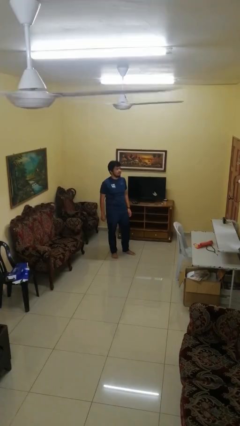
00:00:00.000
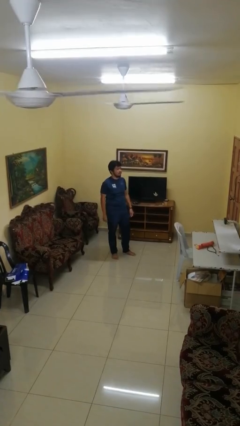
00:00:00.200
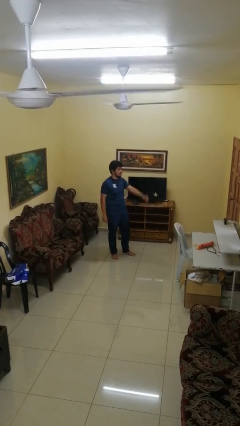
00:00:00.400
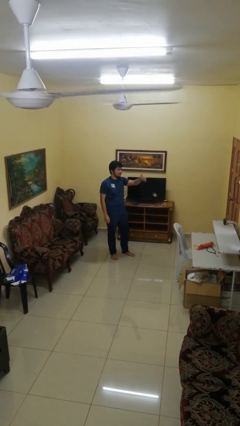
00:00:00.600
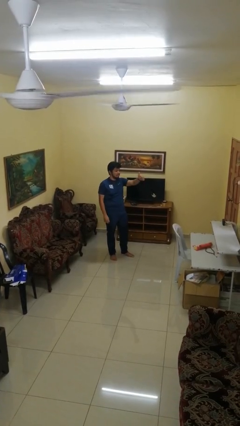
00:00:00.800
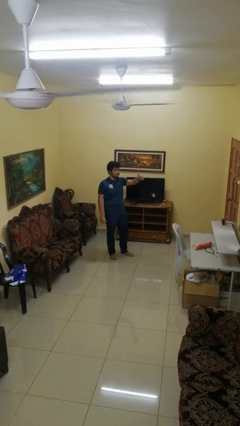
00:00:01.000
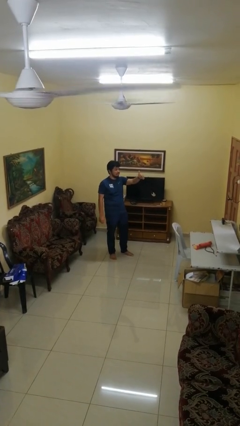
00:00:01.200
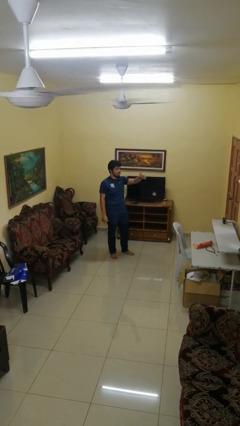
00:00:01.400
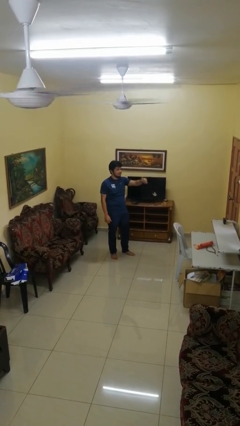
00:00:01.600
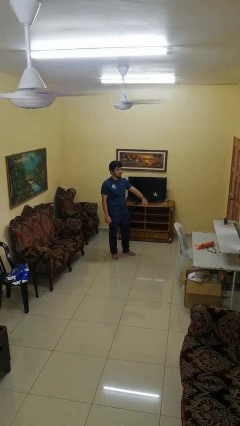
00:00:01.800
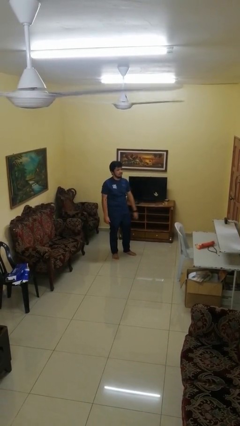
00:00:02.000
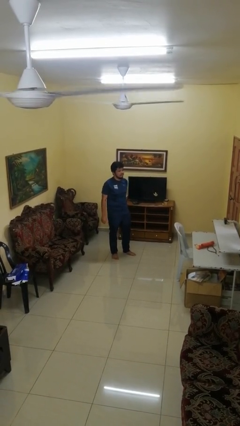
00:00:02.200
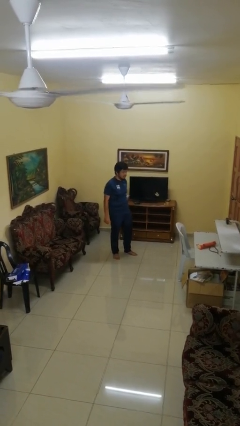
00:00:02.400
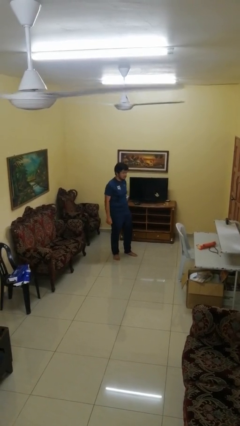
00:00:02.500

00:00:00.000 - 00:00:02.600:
person gestures thumbs up

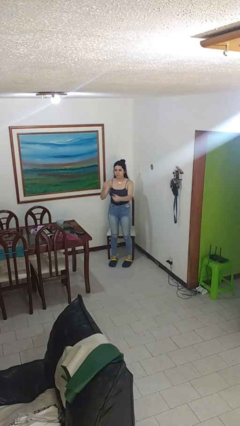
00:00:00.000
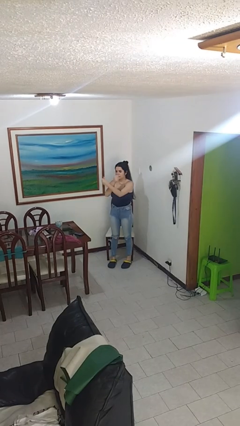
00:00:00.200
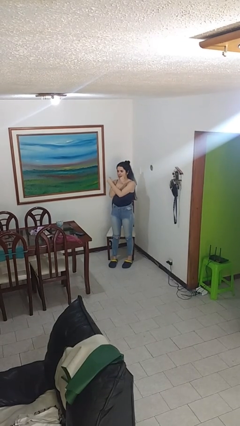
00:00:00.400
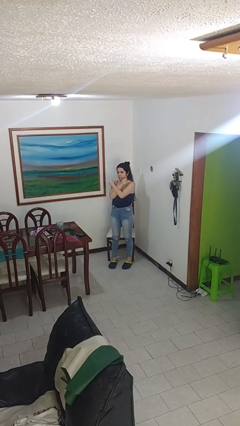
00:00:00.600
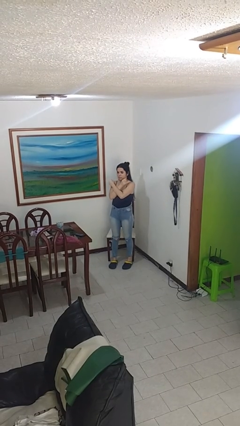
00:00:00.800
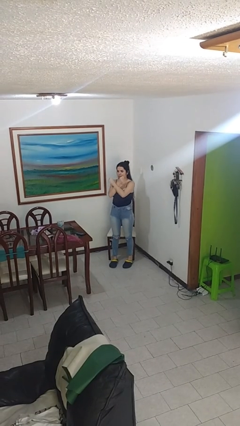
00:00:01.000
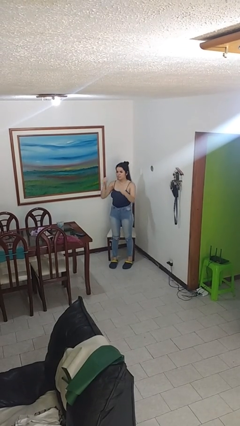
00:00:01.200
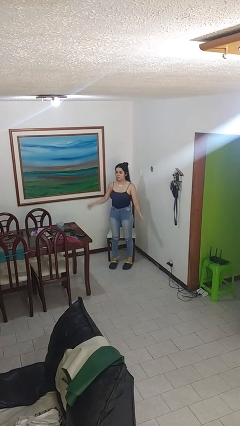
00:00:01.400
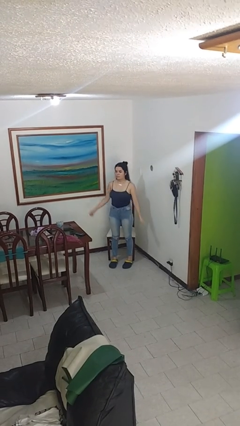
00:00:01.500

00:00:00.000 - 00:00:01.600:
person gestures arms x

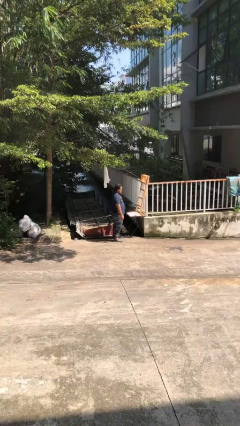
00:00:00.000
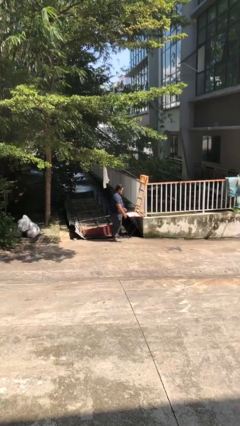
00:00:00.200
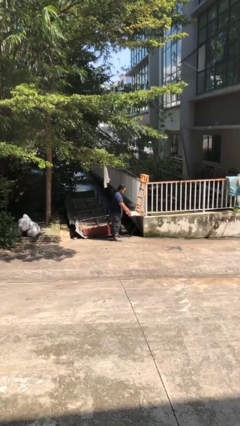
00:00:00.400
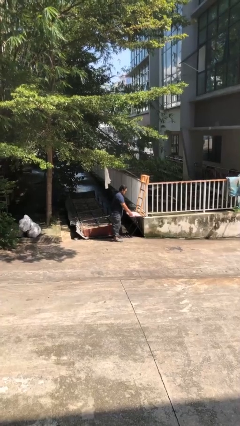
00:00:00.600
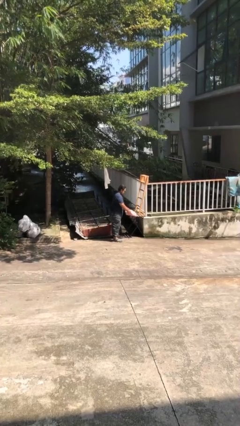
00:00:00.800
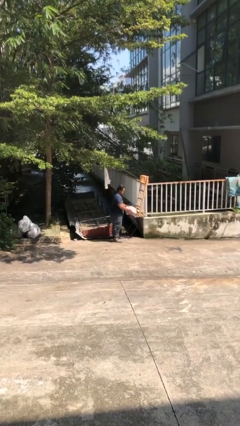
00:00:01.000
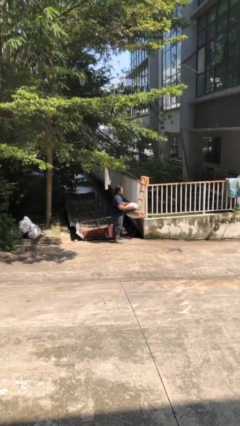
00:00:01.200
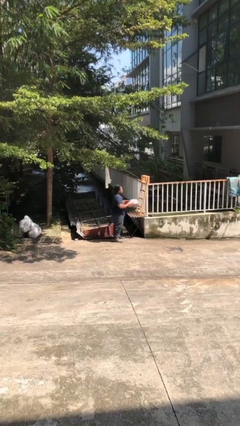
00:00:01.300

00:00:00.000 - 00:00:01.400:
person picks up object from table

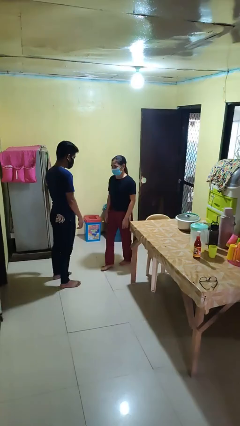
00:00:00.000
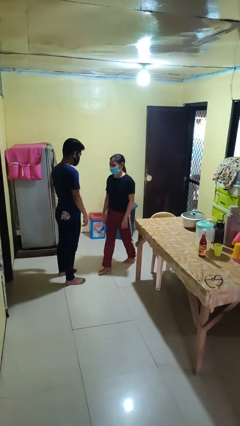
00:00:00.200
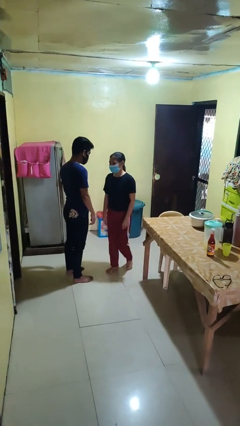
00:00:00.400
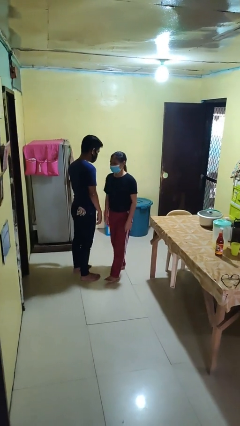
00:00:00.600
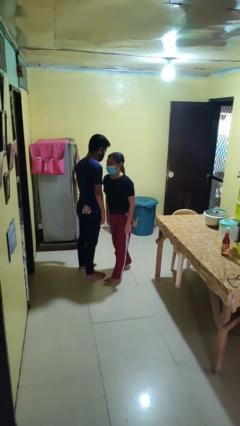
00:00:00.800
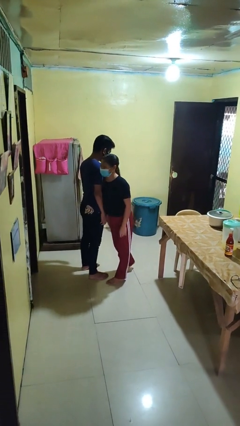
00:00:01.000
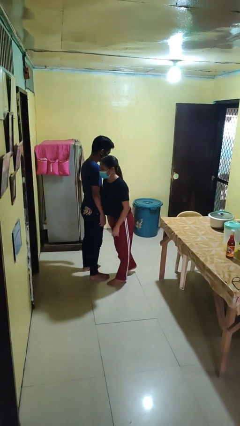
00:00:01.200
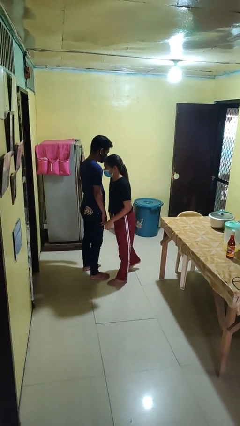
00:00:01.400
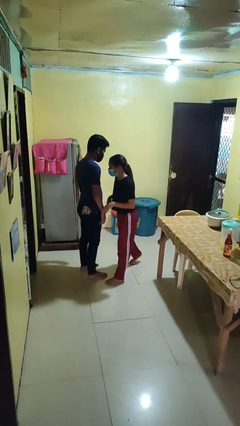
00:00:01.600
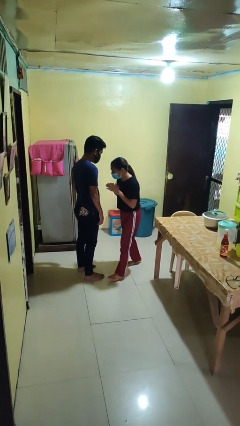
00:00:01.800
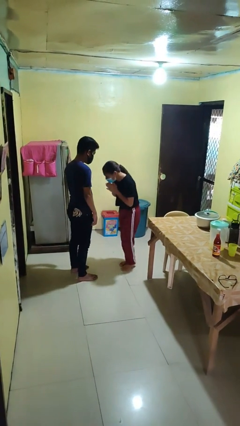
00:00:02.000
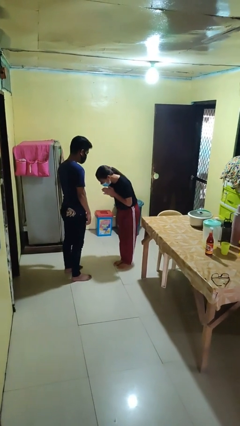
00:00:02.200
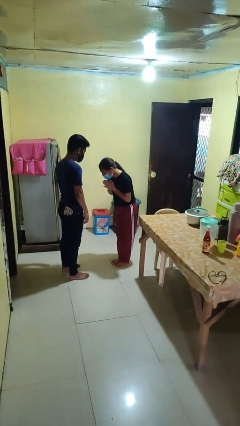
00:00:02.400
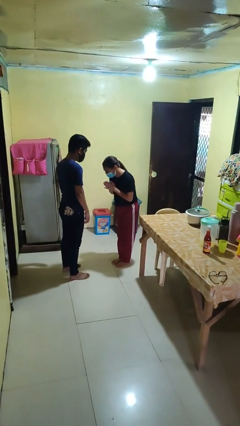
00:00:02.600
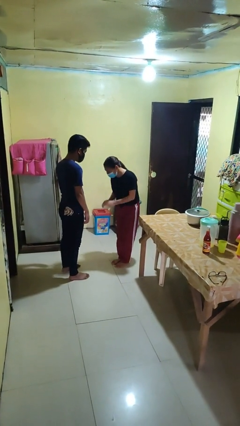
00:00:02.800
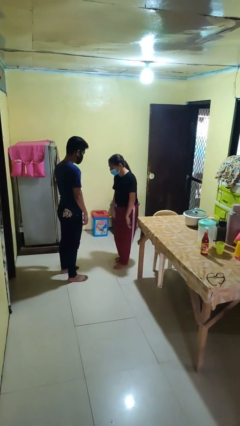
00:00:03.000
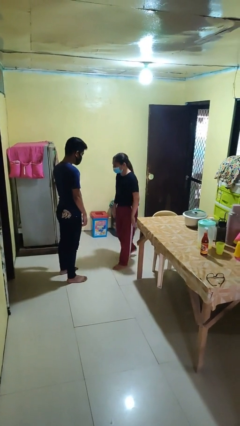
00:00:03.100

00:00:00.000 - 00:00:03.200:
person bumps into person

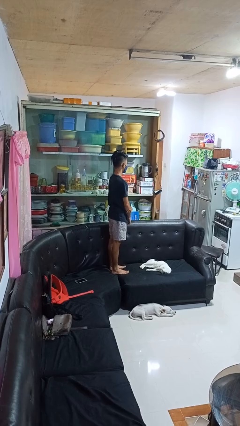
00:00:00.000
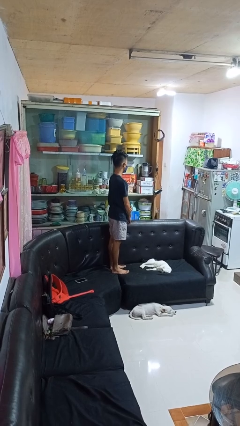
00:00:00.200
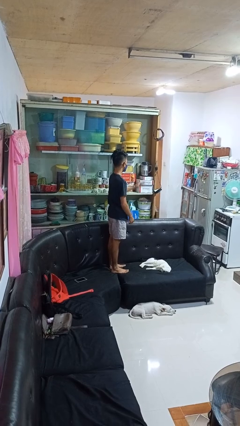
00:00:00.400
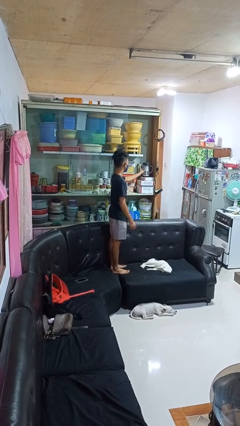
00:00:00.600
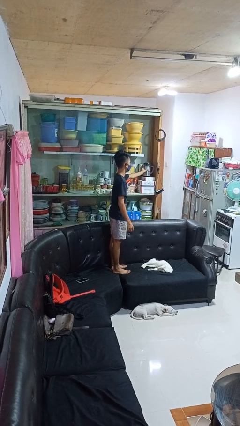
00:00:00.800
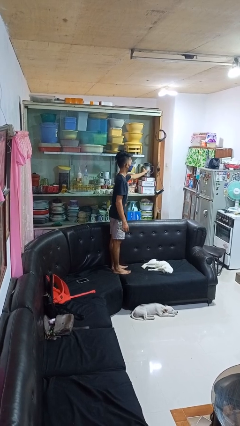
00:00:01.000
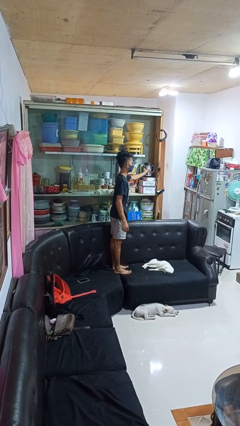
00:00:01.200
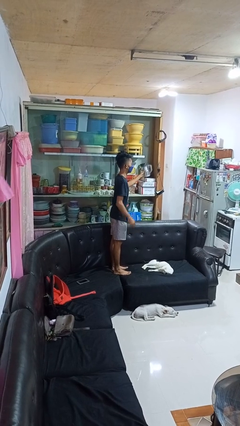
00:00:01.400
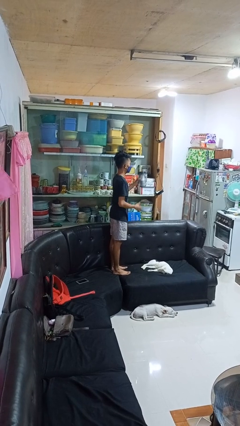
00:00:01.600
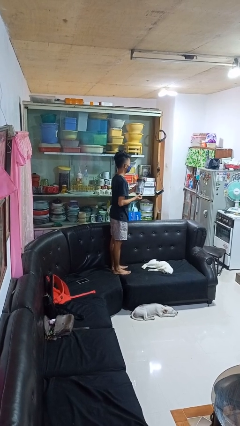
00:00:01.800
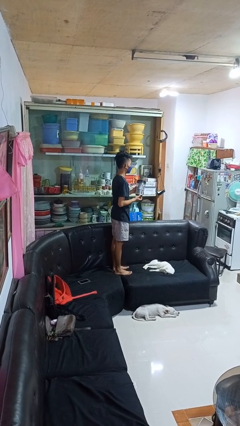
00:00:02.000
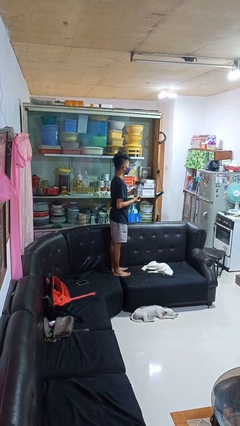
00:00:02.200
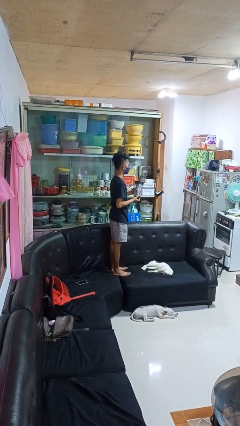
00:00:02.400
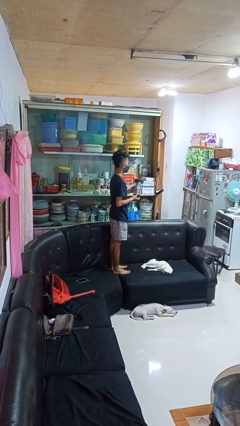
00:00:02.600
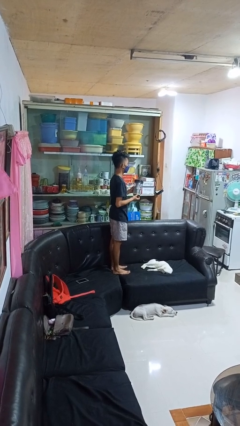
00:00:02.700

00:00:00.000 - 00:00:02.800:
person picks up object from cabinet

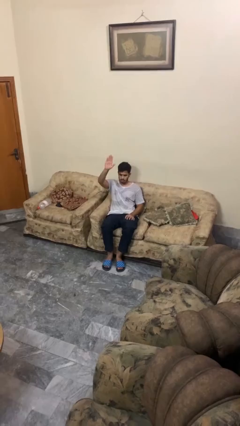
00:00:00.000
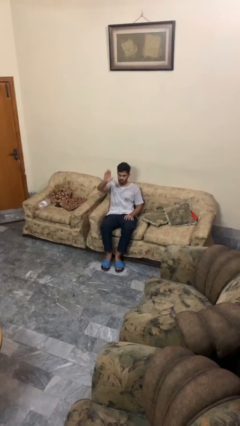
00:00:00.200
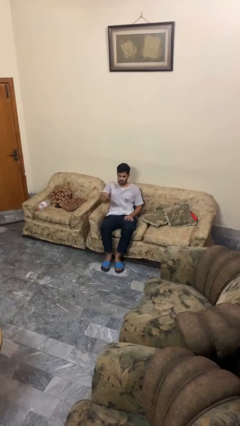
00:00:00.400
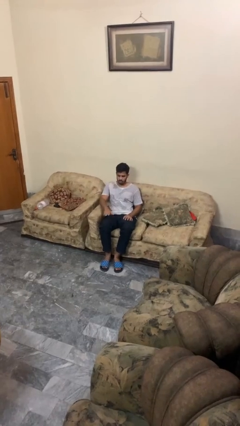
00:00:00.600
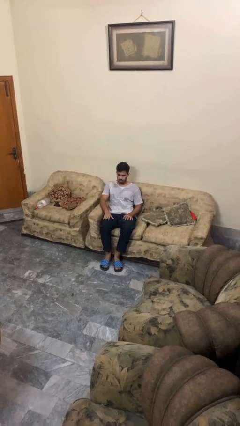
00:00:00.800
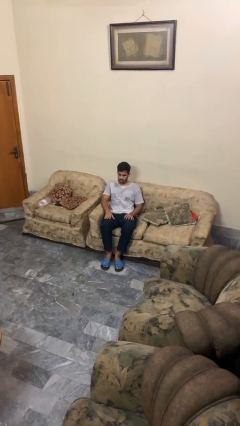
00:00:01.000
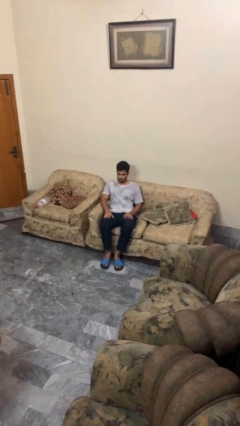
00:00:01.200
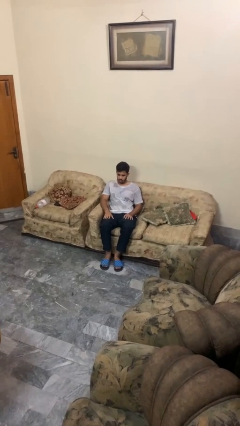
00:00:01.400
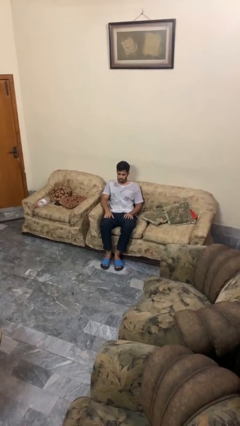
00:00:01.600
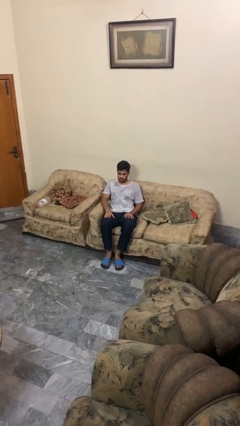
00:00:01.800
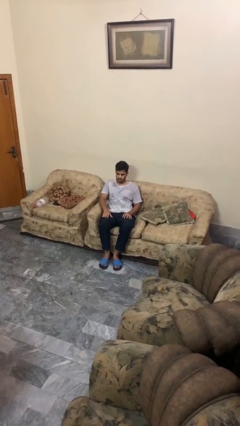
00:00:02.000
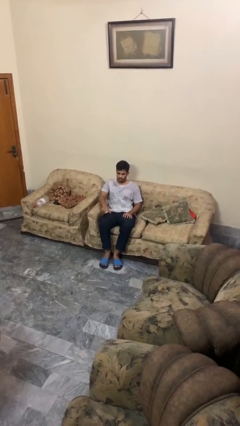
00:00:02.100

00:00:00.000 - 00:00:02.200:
person gestures lower hand

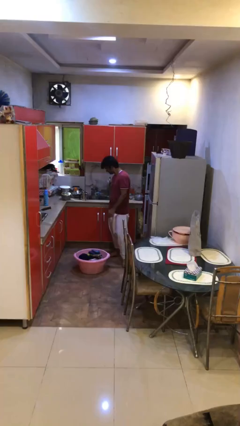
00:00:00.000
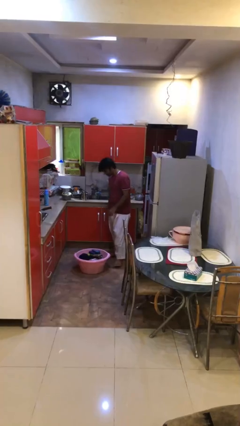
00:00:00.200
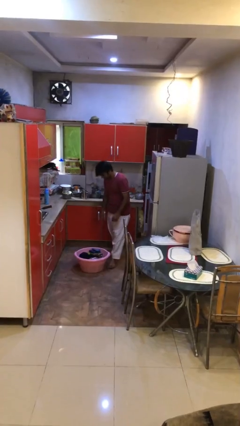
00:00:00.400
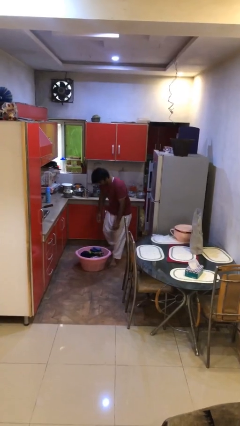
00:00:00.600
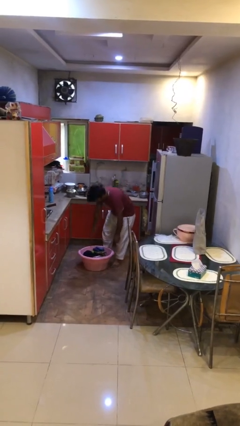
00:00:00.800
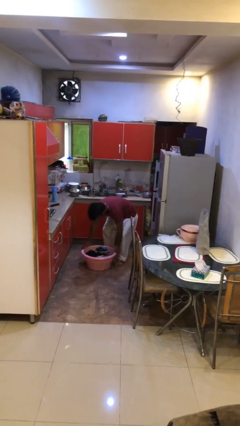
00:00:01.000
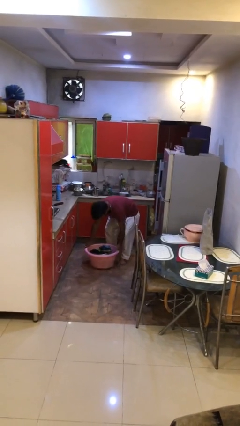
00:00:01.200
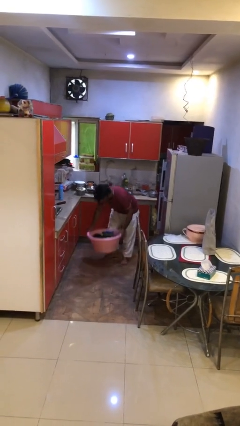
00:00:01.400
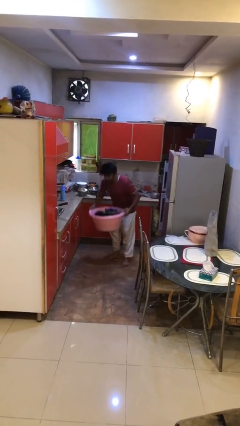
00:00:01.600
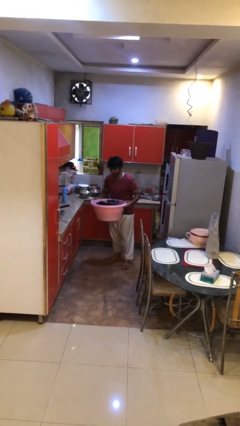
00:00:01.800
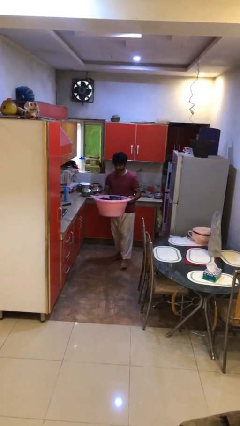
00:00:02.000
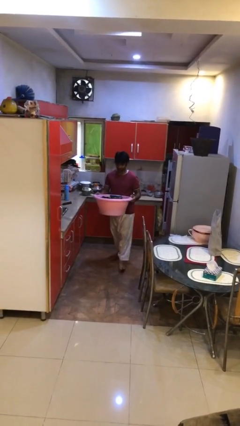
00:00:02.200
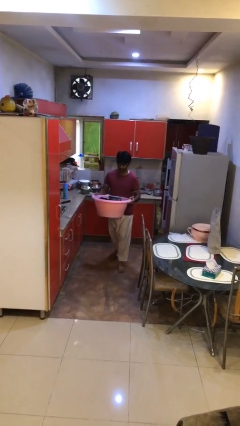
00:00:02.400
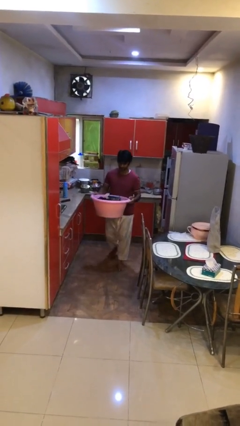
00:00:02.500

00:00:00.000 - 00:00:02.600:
person picks up object from floor

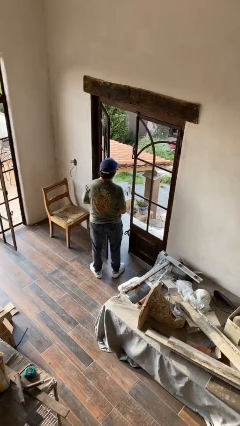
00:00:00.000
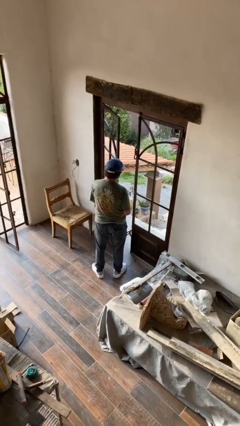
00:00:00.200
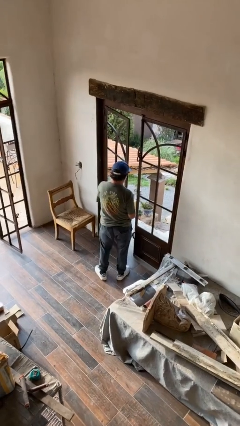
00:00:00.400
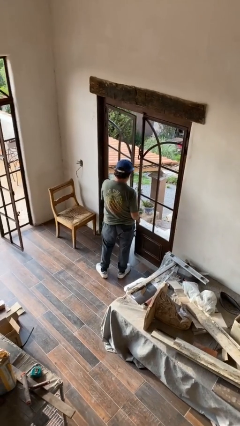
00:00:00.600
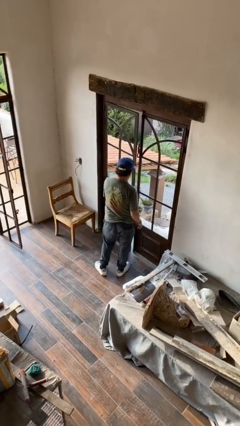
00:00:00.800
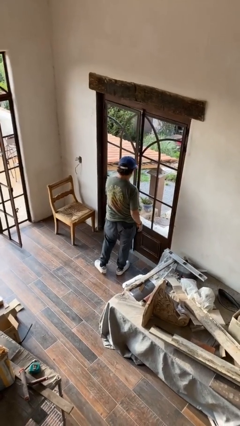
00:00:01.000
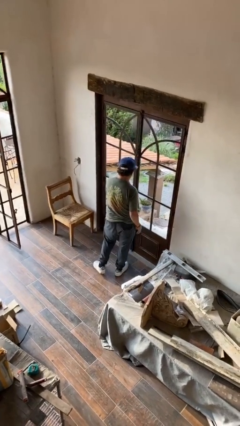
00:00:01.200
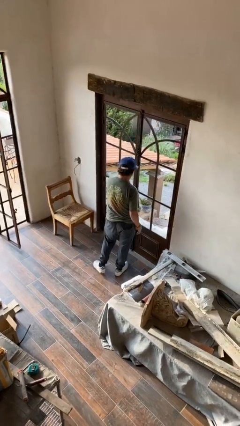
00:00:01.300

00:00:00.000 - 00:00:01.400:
person closes facility door
